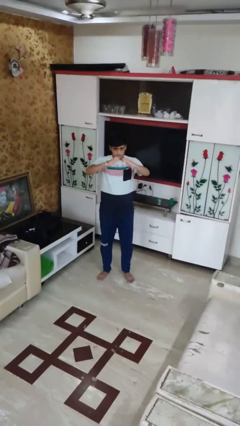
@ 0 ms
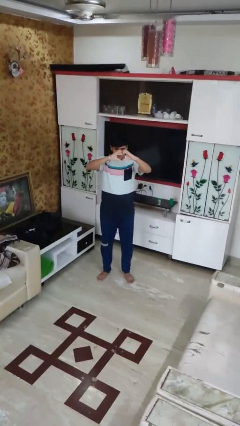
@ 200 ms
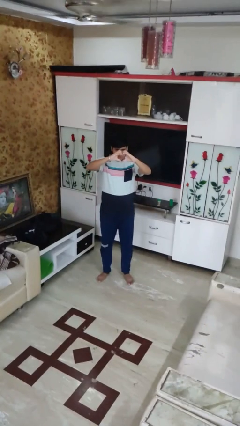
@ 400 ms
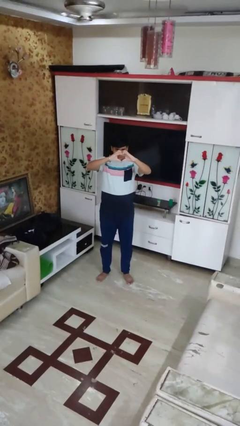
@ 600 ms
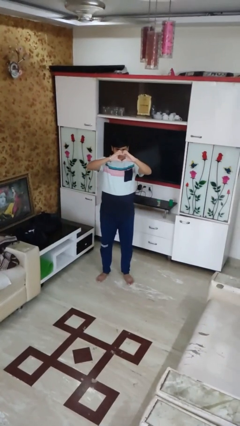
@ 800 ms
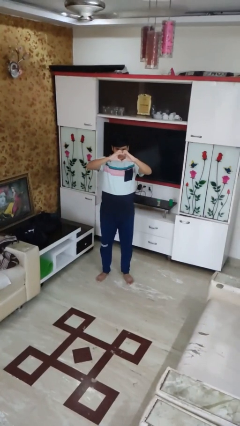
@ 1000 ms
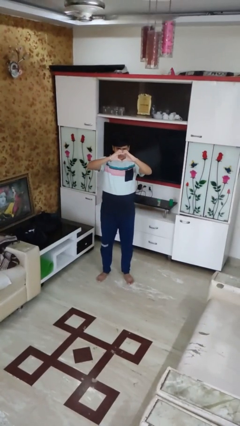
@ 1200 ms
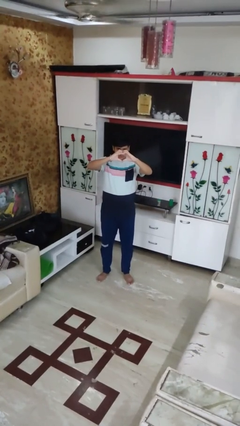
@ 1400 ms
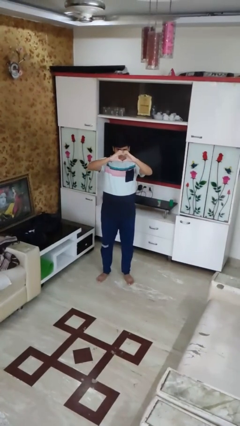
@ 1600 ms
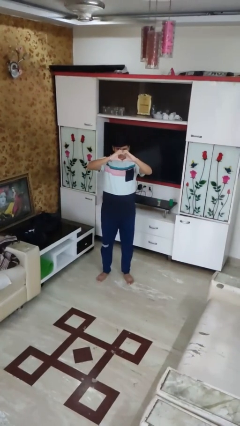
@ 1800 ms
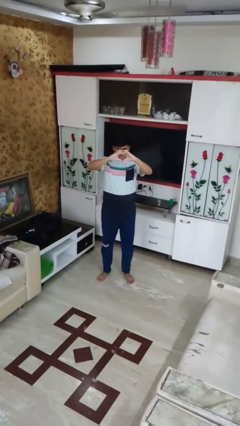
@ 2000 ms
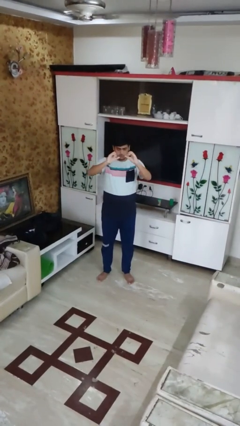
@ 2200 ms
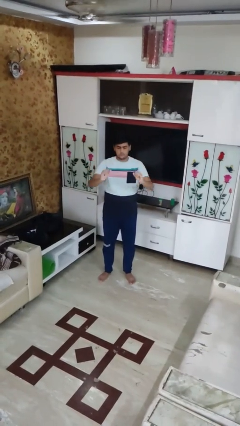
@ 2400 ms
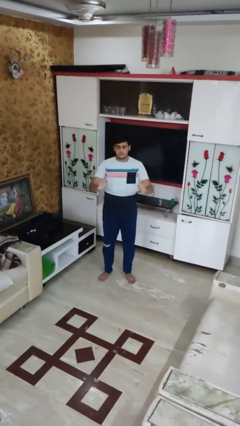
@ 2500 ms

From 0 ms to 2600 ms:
person gestures heart

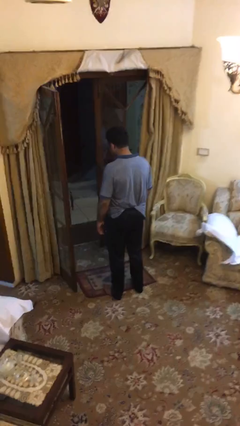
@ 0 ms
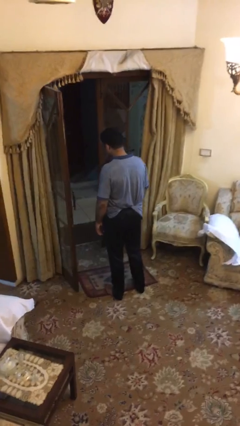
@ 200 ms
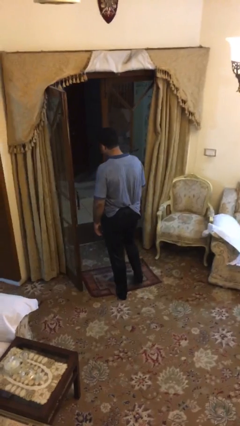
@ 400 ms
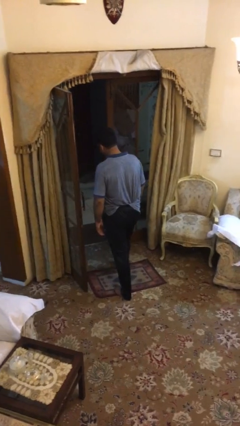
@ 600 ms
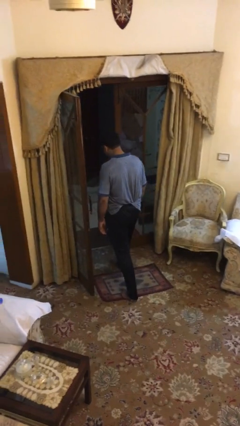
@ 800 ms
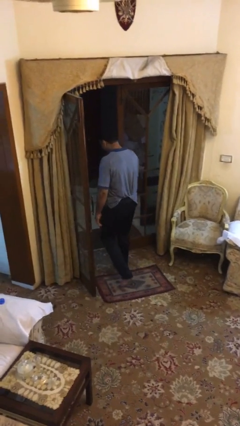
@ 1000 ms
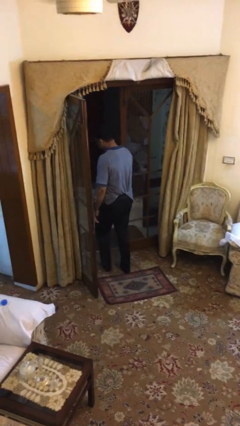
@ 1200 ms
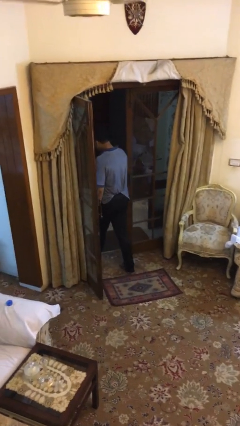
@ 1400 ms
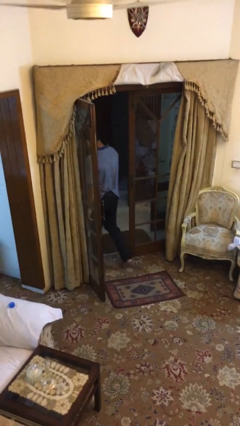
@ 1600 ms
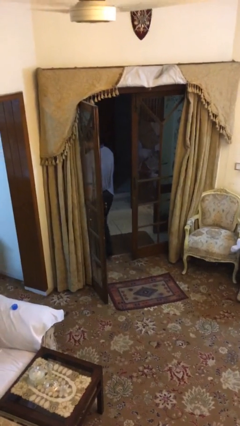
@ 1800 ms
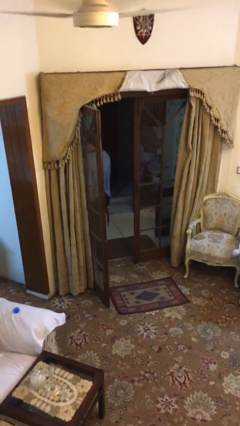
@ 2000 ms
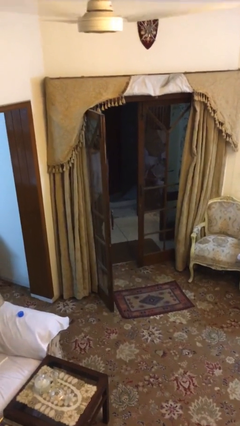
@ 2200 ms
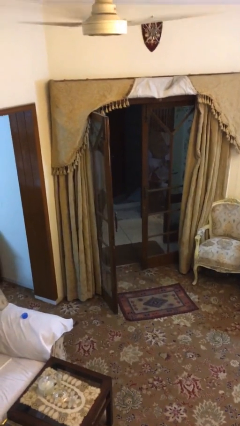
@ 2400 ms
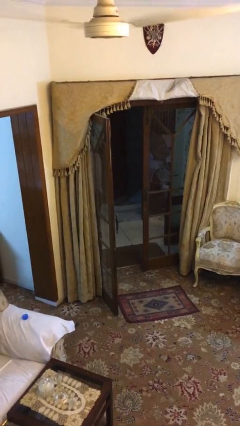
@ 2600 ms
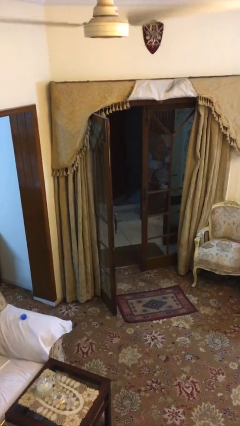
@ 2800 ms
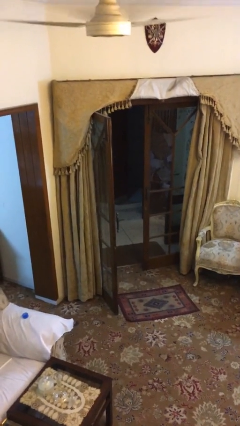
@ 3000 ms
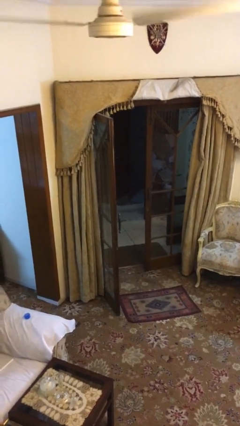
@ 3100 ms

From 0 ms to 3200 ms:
person exits scene through structure

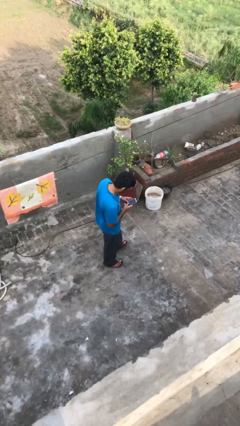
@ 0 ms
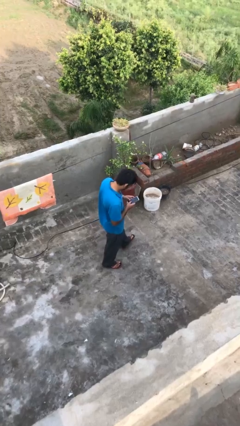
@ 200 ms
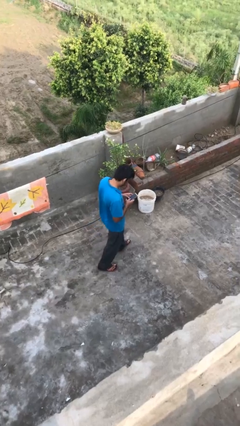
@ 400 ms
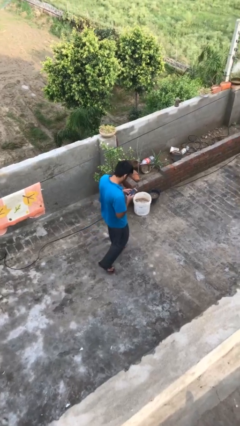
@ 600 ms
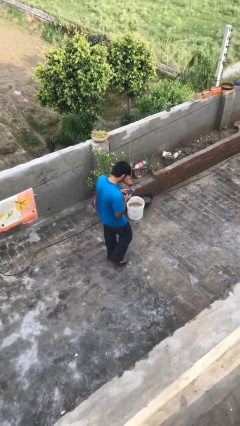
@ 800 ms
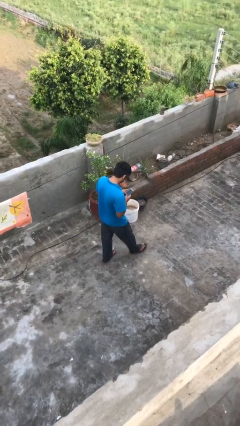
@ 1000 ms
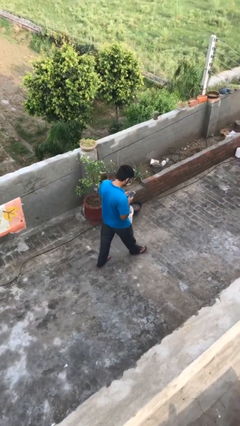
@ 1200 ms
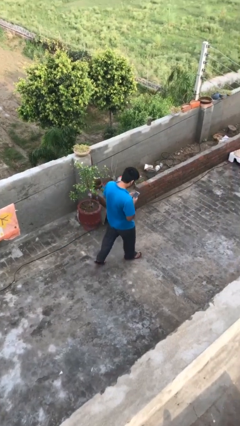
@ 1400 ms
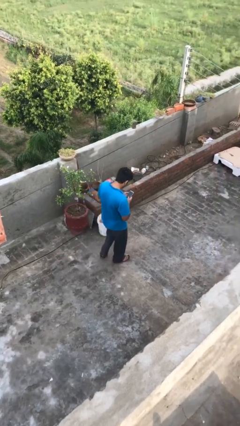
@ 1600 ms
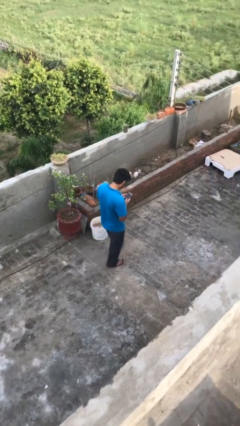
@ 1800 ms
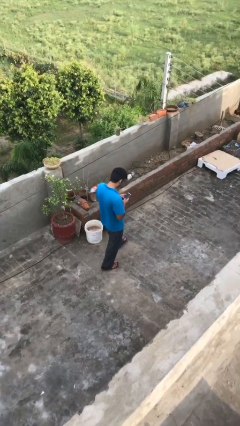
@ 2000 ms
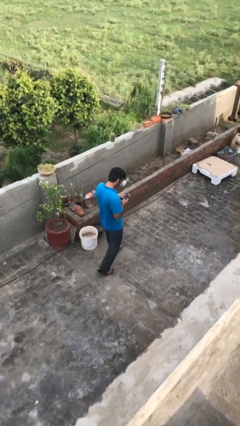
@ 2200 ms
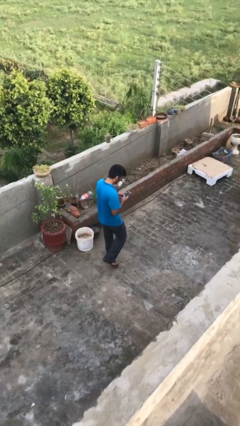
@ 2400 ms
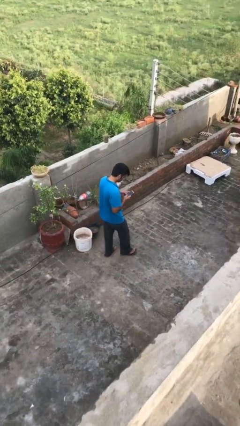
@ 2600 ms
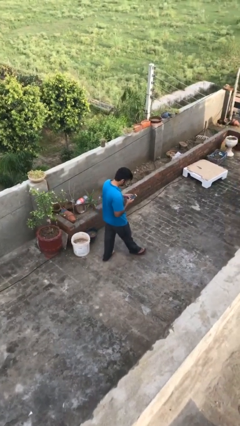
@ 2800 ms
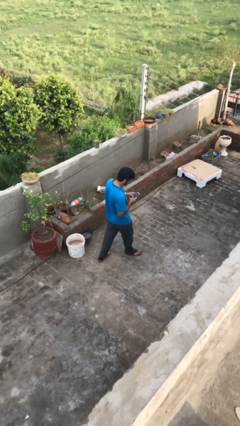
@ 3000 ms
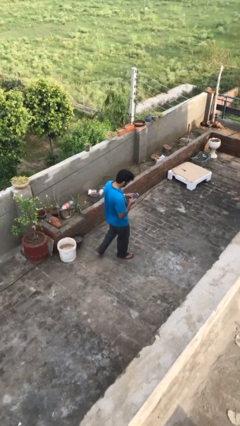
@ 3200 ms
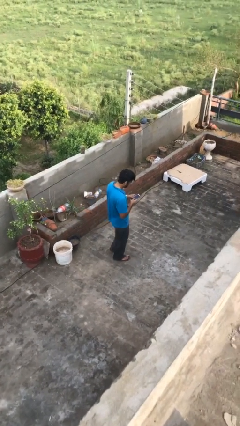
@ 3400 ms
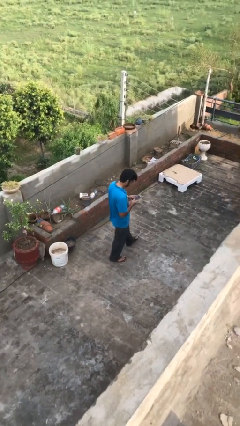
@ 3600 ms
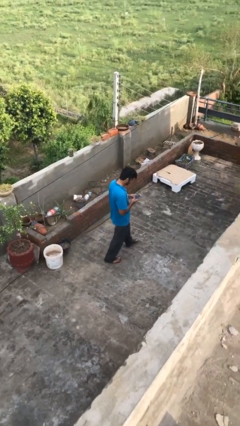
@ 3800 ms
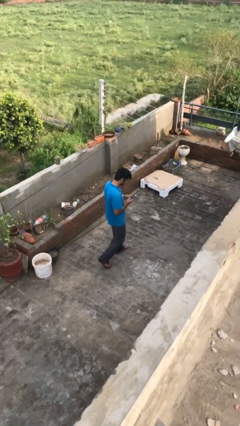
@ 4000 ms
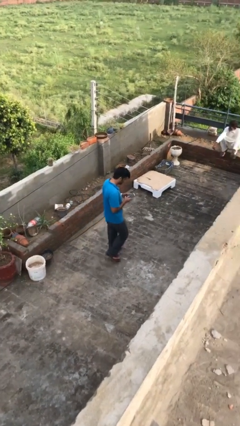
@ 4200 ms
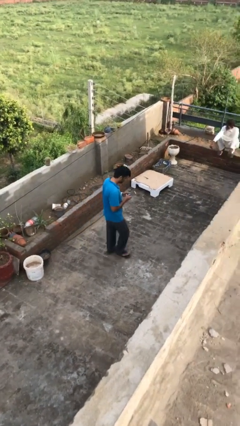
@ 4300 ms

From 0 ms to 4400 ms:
person texts on phone

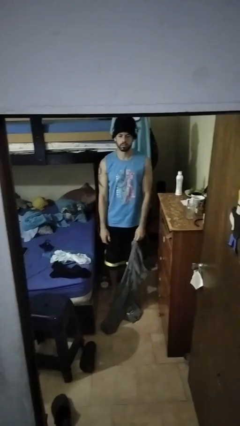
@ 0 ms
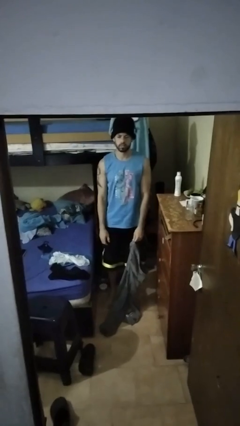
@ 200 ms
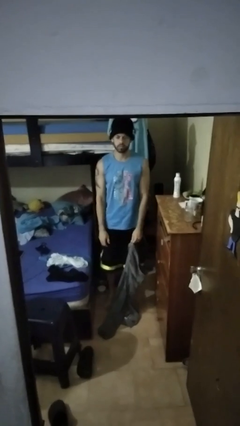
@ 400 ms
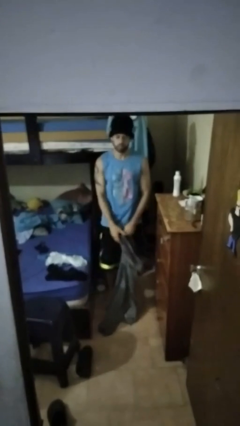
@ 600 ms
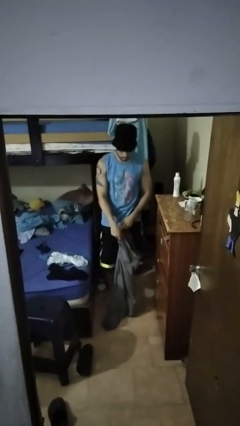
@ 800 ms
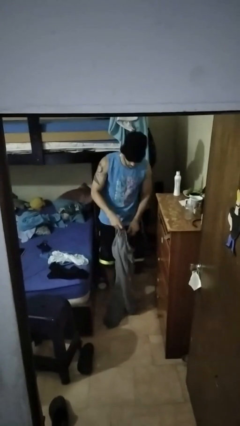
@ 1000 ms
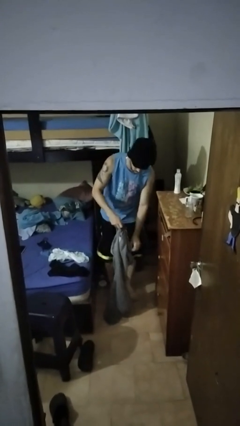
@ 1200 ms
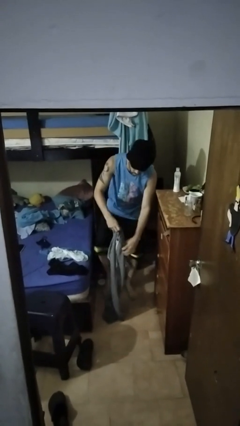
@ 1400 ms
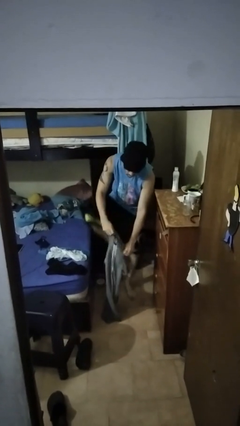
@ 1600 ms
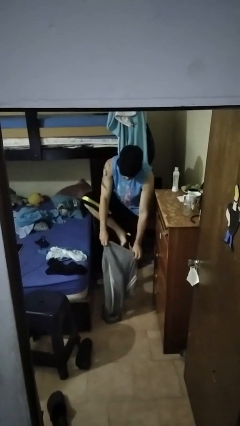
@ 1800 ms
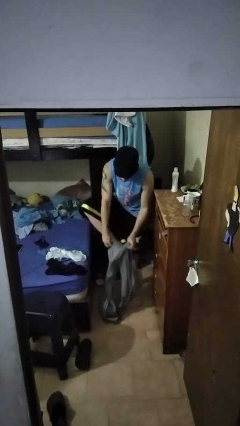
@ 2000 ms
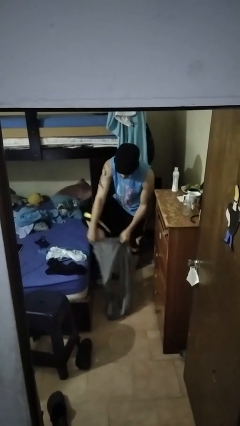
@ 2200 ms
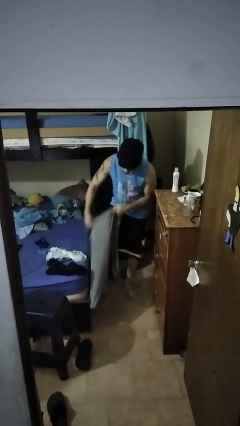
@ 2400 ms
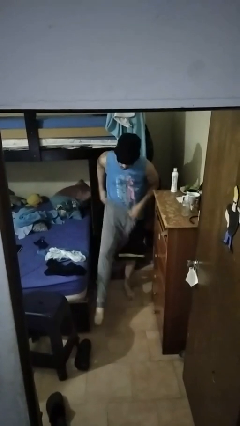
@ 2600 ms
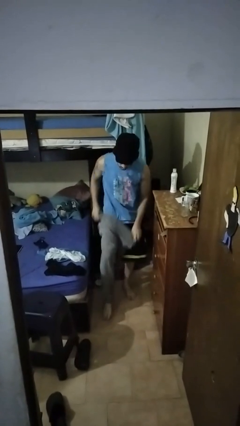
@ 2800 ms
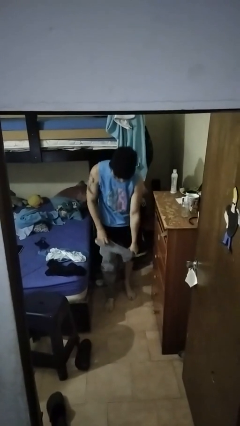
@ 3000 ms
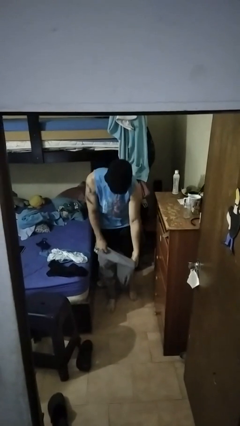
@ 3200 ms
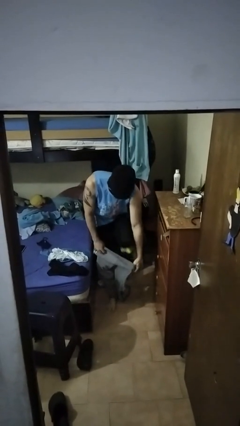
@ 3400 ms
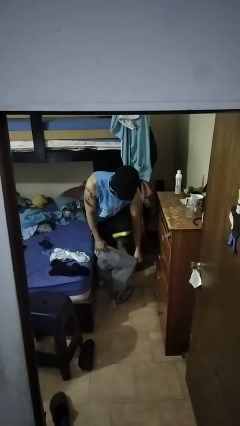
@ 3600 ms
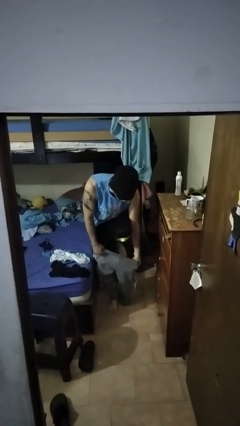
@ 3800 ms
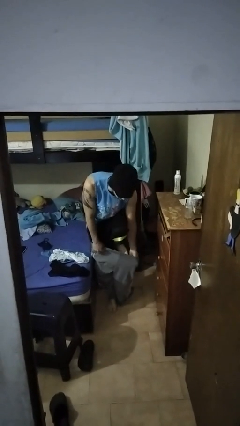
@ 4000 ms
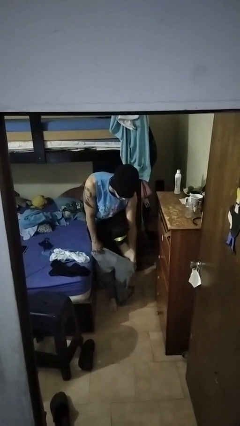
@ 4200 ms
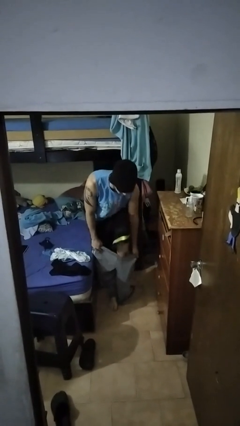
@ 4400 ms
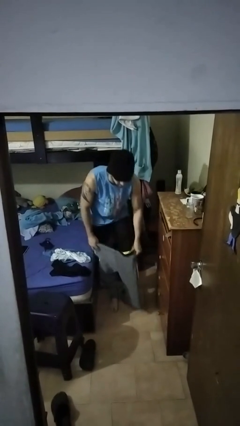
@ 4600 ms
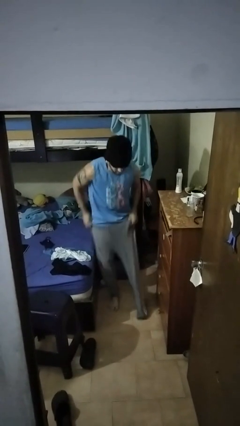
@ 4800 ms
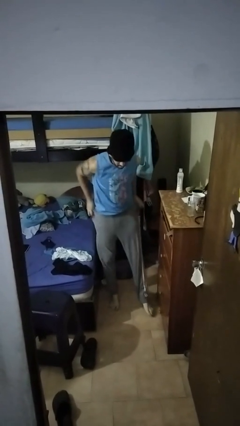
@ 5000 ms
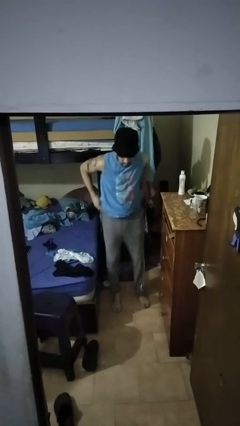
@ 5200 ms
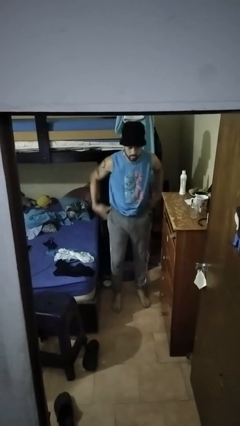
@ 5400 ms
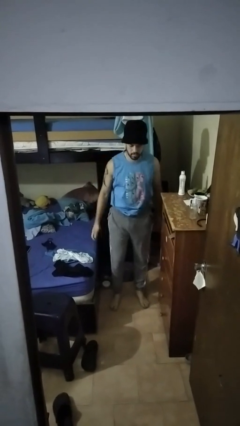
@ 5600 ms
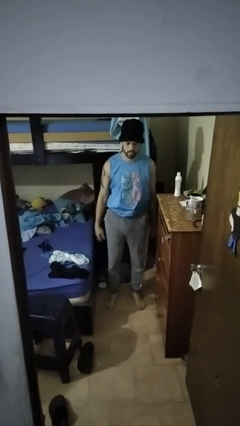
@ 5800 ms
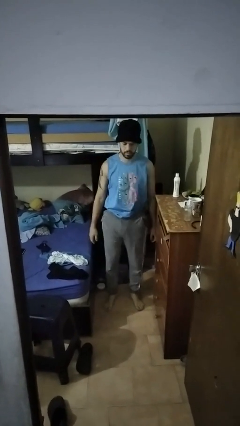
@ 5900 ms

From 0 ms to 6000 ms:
person puts on pants

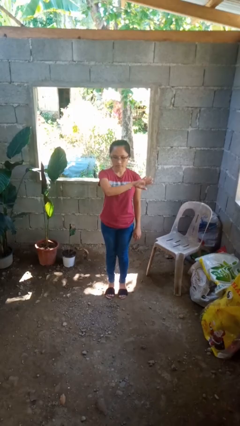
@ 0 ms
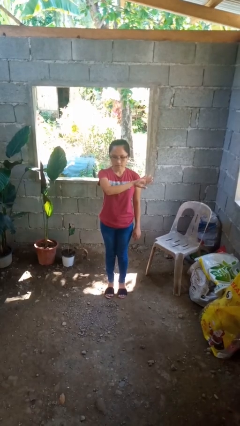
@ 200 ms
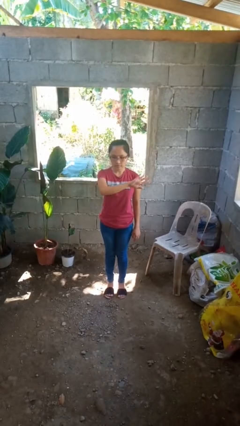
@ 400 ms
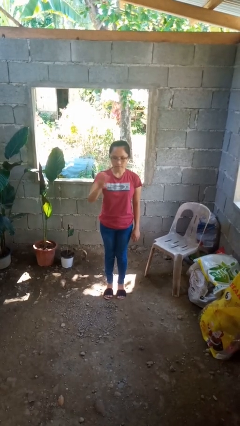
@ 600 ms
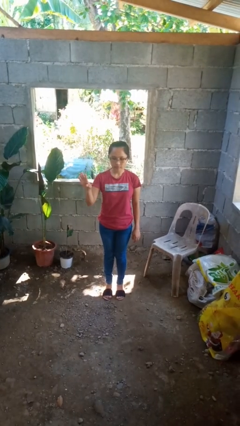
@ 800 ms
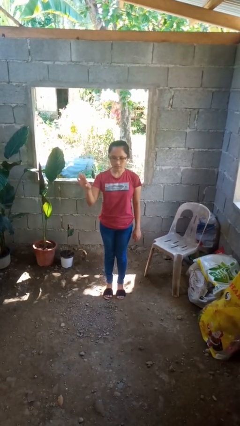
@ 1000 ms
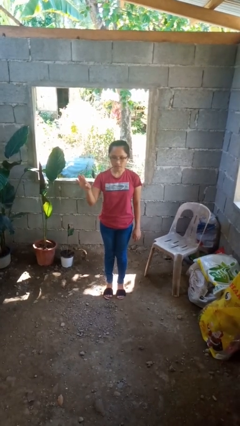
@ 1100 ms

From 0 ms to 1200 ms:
person gestures swipe right
